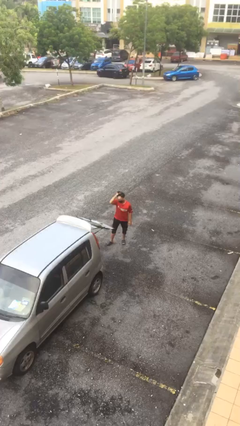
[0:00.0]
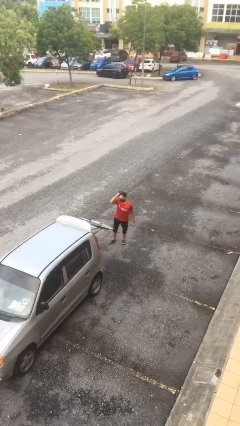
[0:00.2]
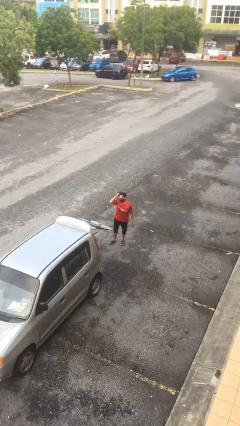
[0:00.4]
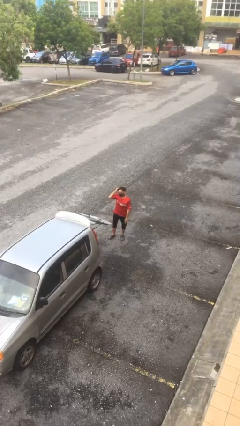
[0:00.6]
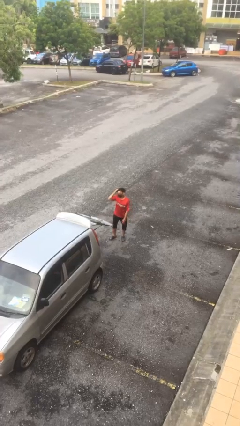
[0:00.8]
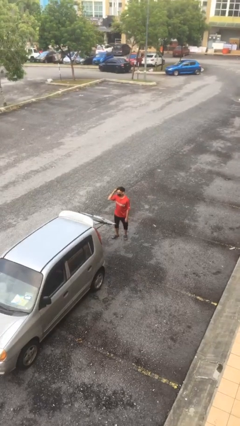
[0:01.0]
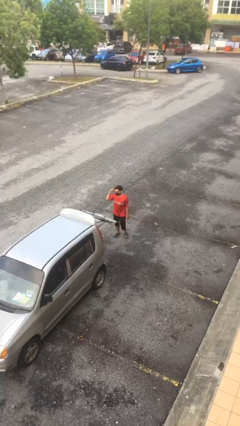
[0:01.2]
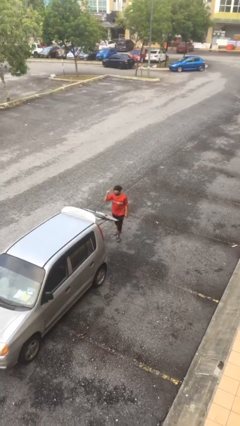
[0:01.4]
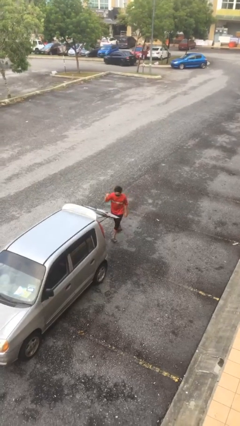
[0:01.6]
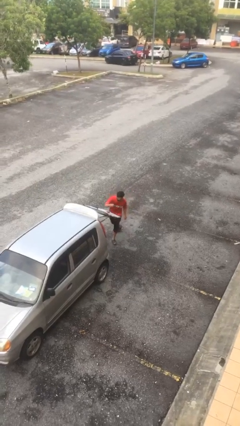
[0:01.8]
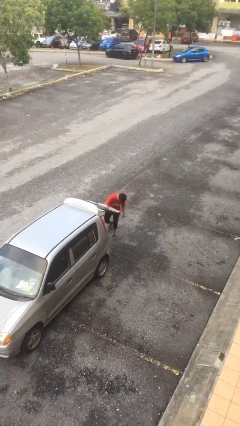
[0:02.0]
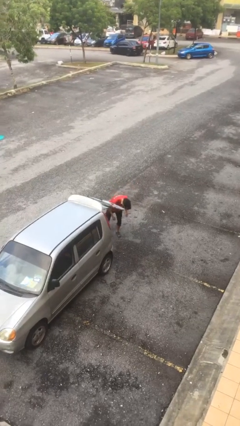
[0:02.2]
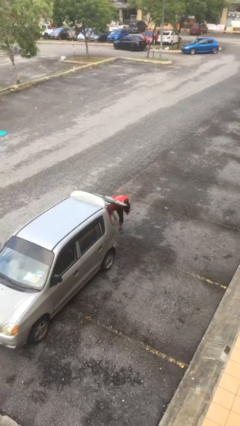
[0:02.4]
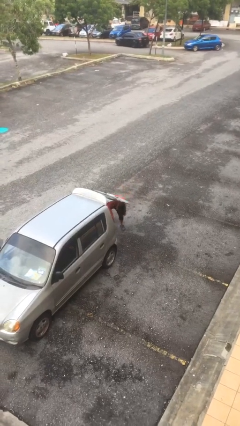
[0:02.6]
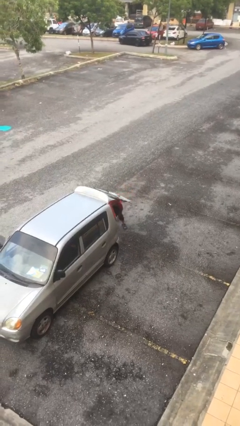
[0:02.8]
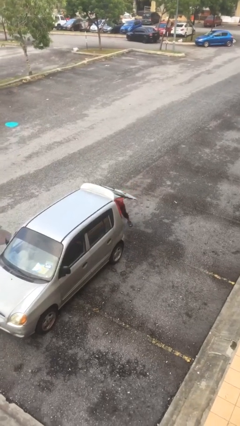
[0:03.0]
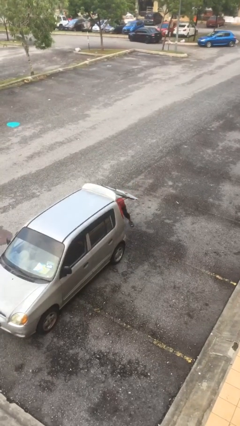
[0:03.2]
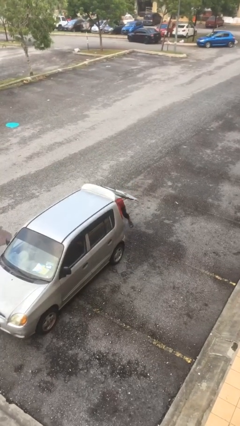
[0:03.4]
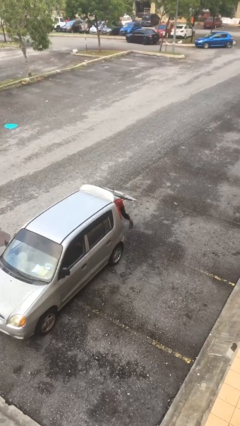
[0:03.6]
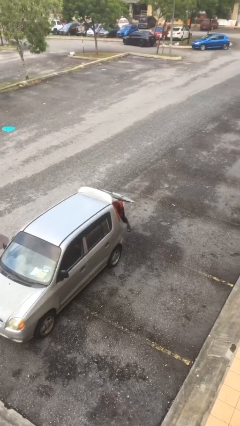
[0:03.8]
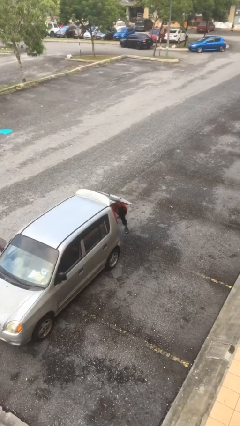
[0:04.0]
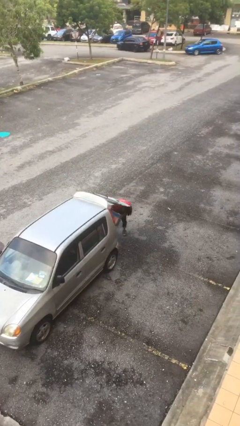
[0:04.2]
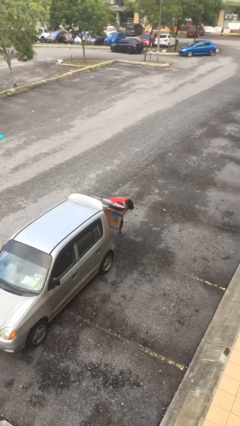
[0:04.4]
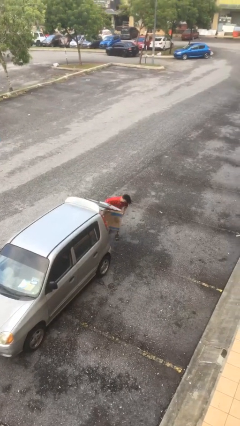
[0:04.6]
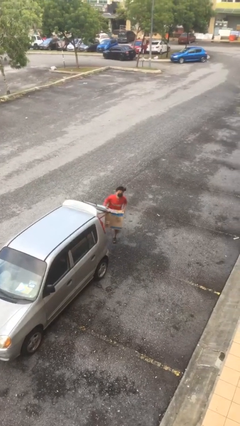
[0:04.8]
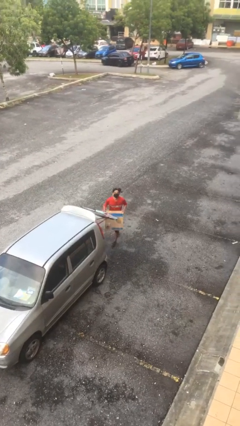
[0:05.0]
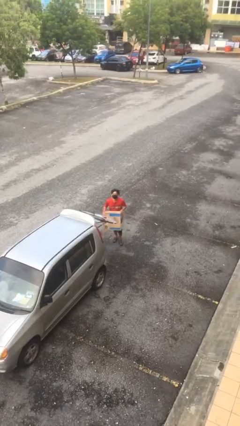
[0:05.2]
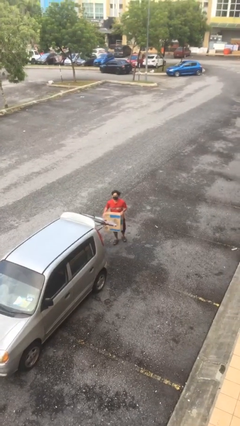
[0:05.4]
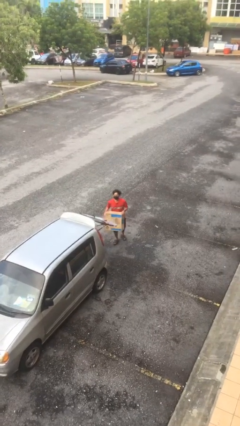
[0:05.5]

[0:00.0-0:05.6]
person unloads car

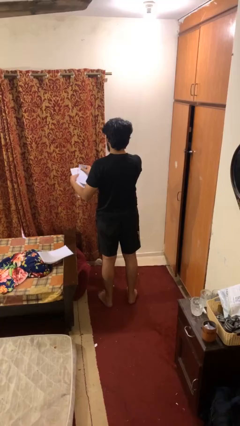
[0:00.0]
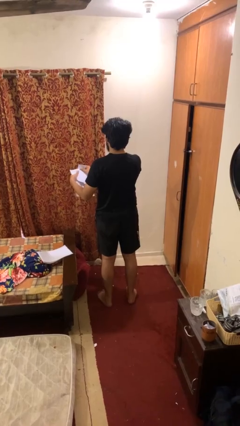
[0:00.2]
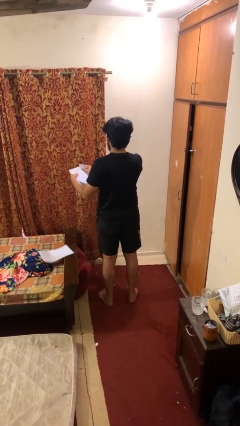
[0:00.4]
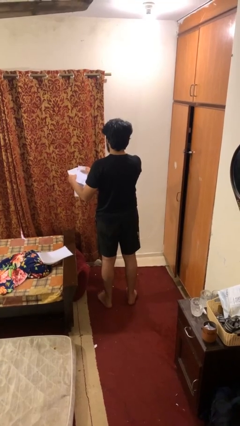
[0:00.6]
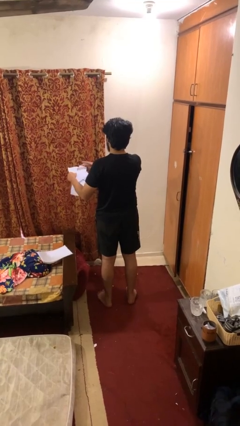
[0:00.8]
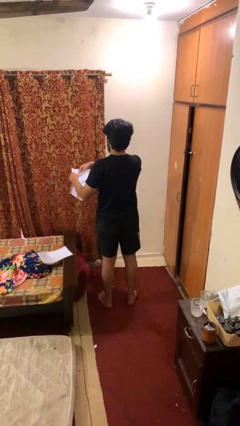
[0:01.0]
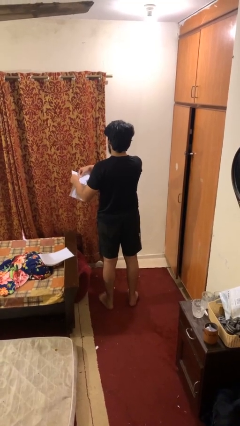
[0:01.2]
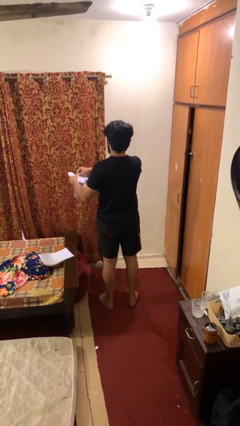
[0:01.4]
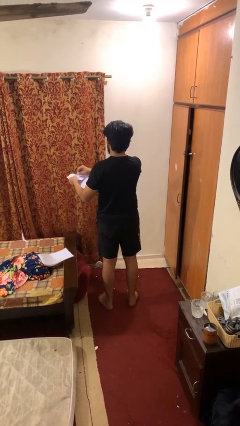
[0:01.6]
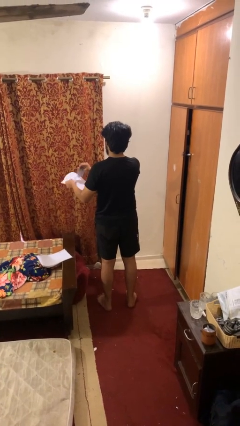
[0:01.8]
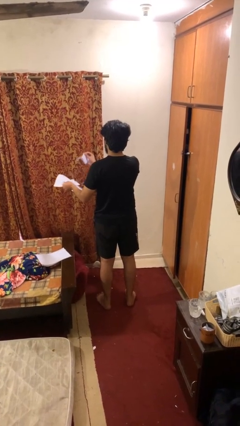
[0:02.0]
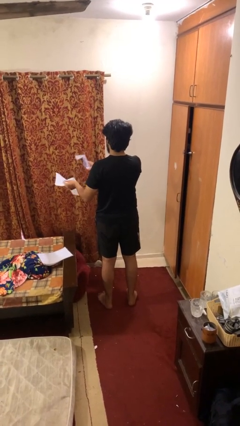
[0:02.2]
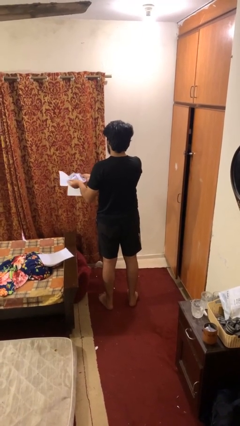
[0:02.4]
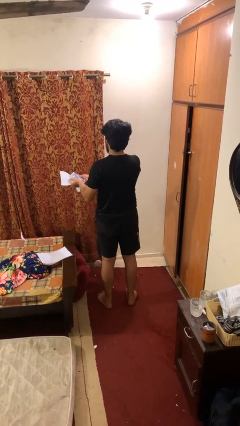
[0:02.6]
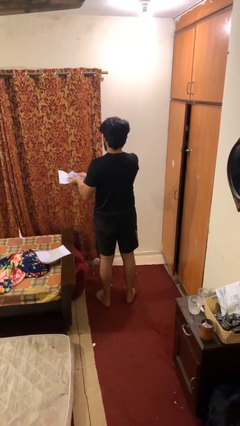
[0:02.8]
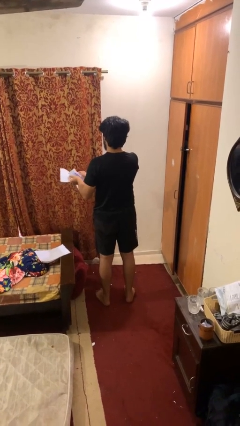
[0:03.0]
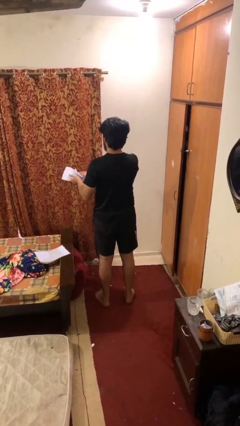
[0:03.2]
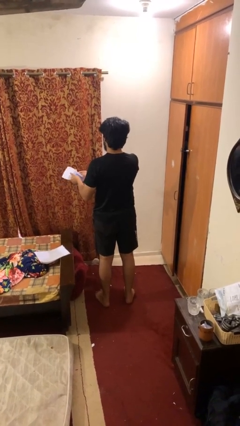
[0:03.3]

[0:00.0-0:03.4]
person tears paper

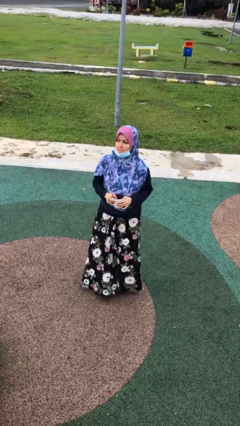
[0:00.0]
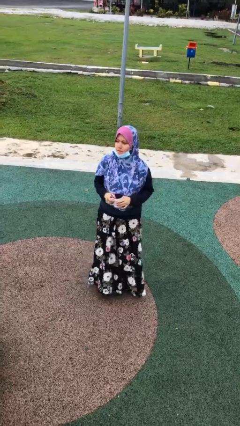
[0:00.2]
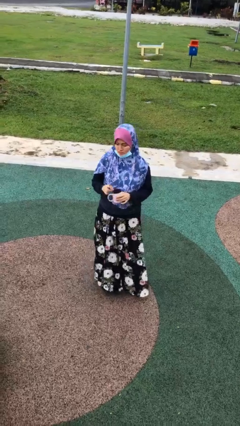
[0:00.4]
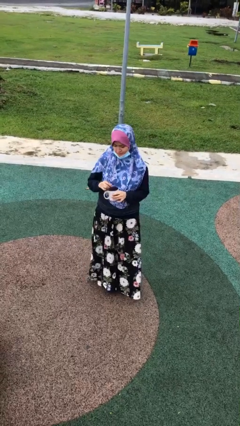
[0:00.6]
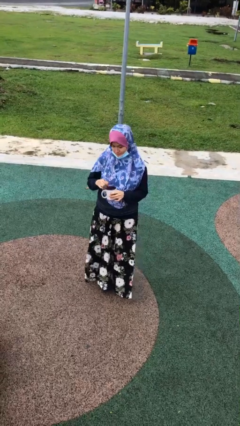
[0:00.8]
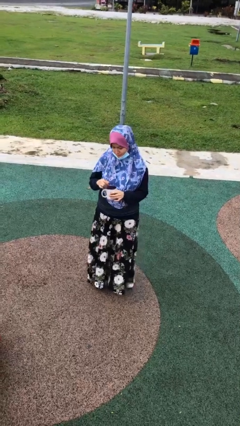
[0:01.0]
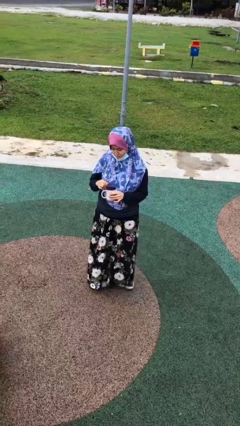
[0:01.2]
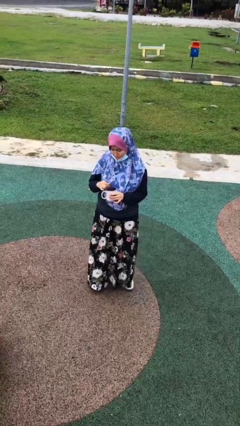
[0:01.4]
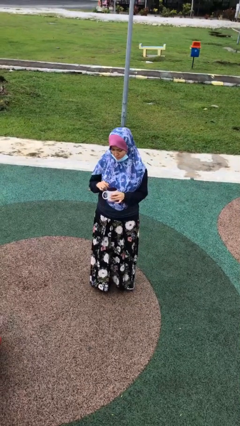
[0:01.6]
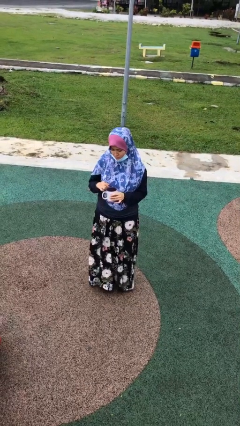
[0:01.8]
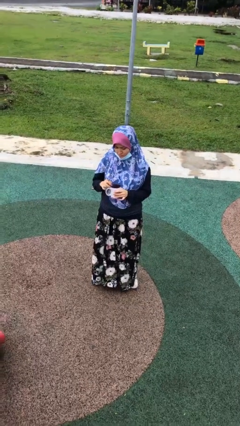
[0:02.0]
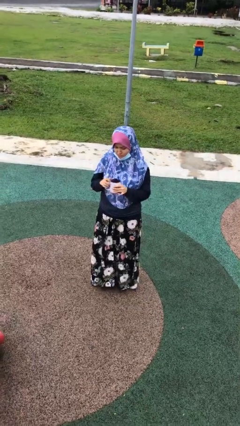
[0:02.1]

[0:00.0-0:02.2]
person stirs mug

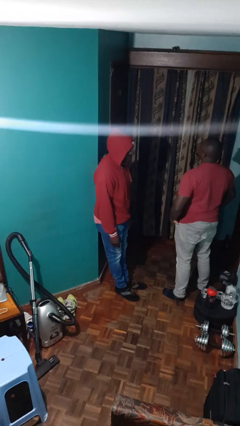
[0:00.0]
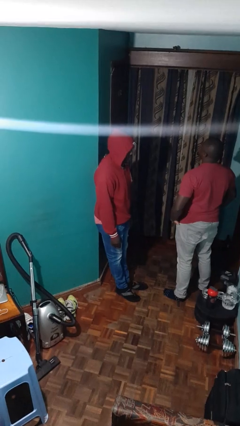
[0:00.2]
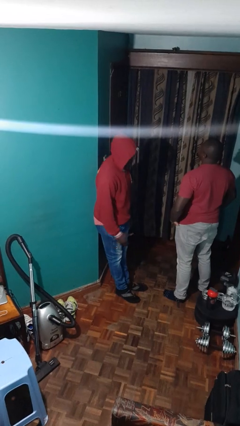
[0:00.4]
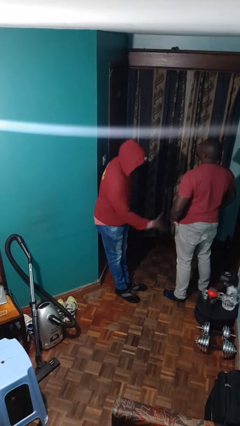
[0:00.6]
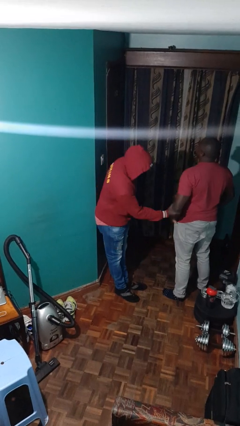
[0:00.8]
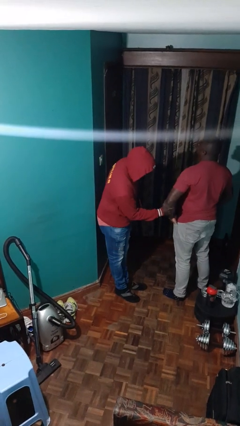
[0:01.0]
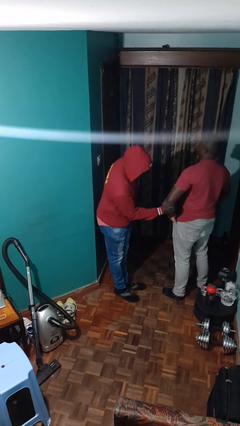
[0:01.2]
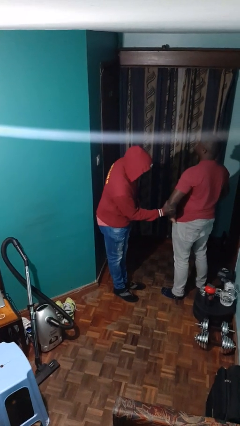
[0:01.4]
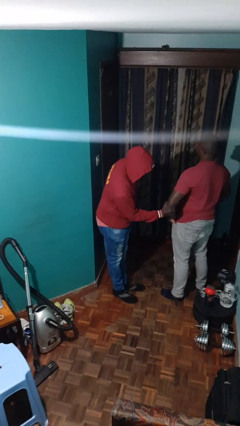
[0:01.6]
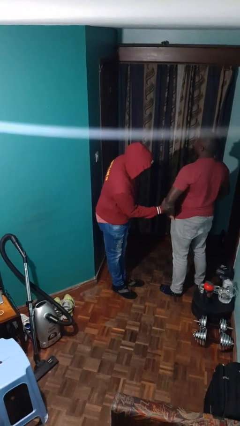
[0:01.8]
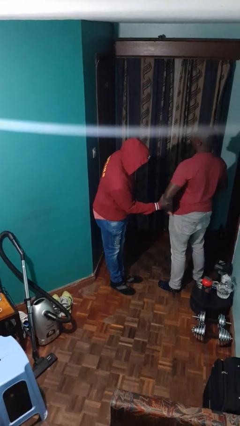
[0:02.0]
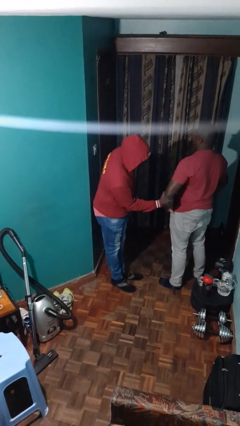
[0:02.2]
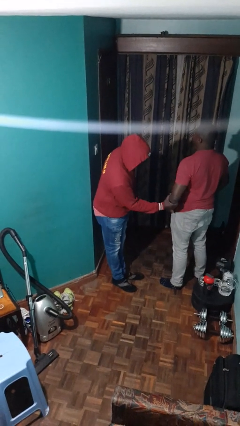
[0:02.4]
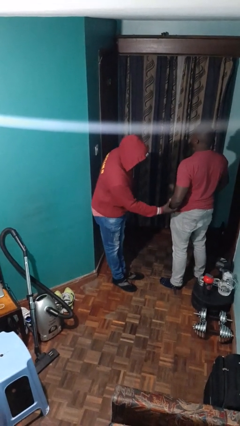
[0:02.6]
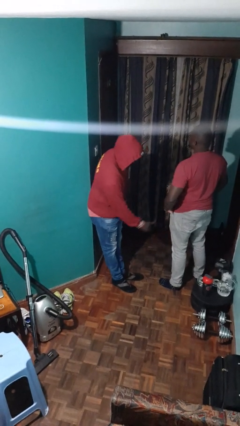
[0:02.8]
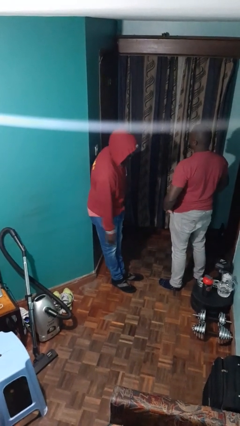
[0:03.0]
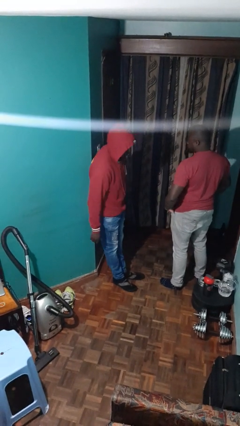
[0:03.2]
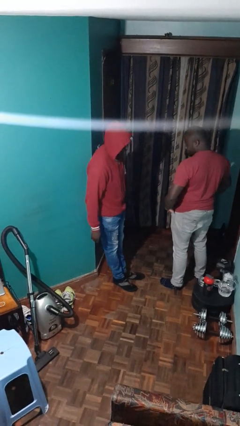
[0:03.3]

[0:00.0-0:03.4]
person grabs person by forearm

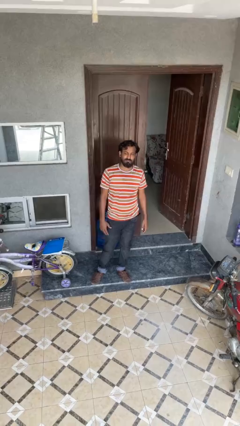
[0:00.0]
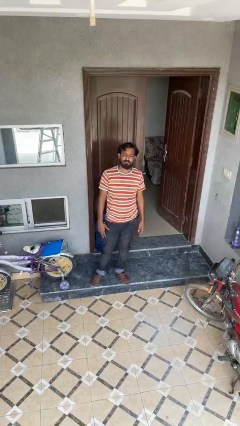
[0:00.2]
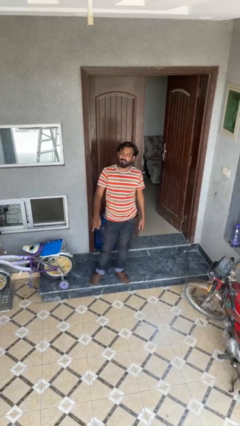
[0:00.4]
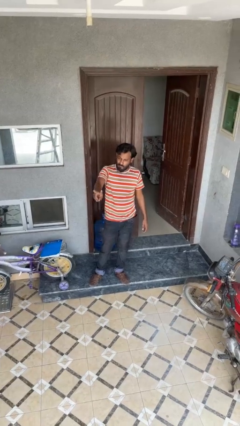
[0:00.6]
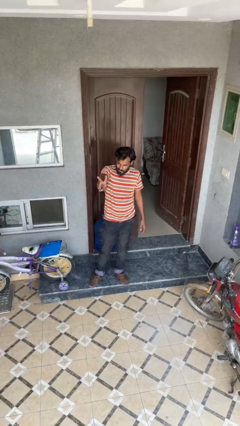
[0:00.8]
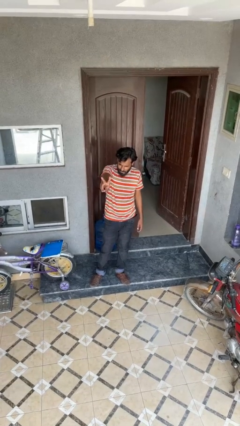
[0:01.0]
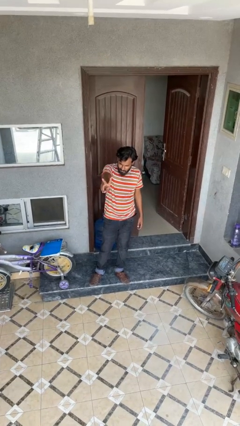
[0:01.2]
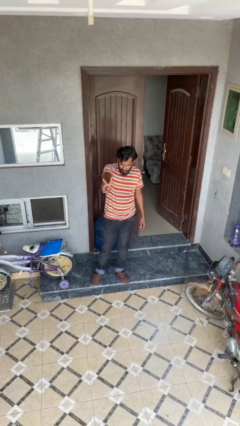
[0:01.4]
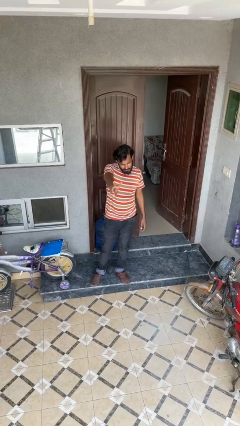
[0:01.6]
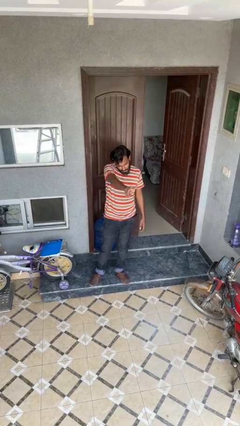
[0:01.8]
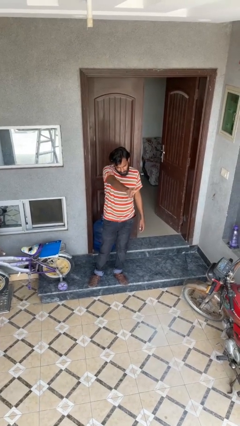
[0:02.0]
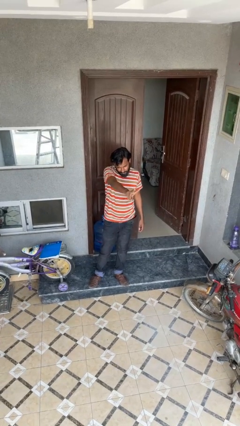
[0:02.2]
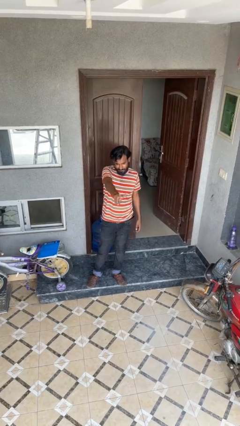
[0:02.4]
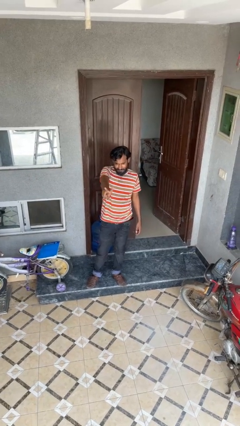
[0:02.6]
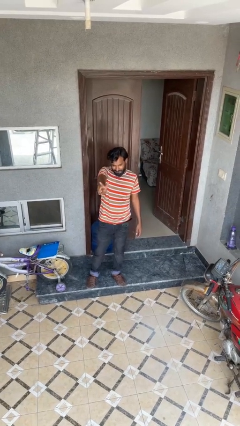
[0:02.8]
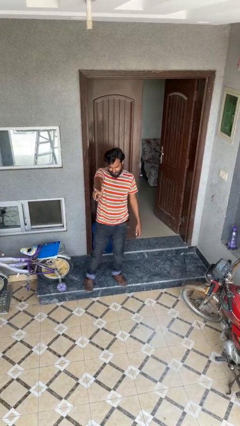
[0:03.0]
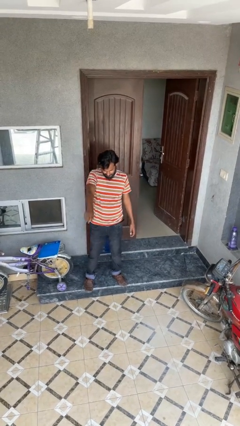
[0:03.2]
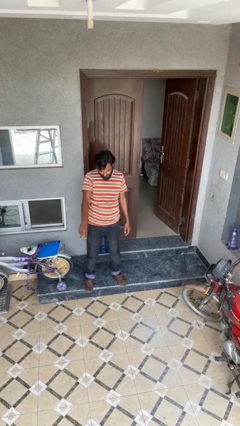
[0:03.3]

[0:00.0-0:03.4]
person gestures peace
